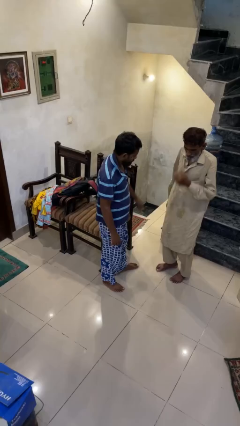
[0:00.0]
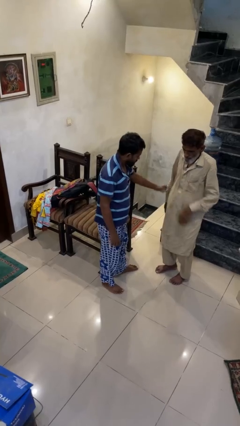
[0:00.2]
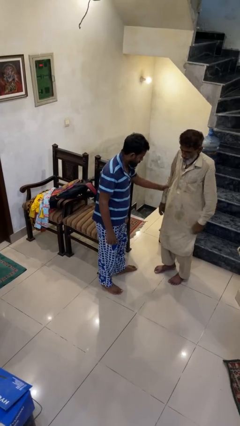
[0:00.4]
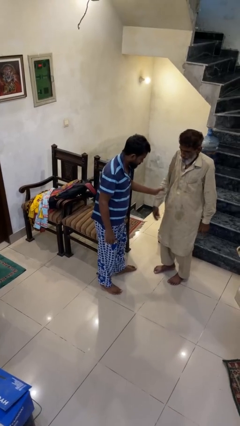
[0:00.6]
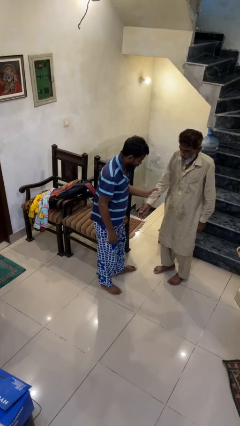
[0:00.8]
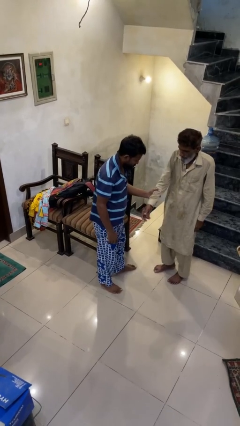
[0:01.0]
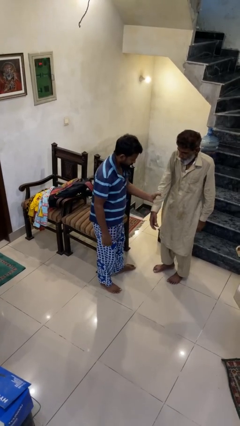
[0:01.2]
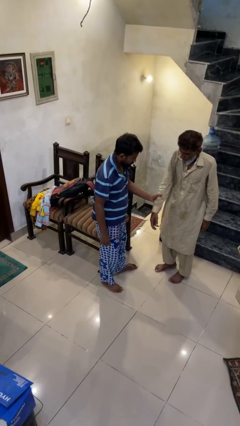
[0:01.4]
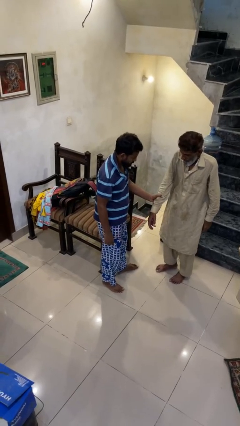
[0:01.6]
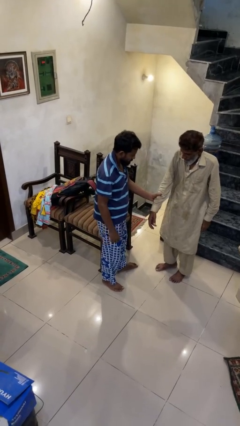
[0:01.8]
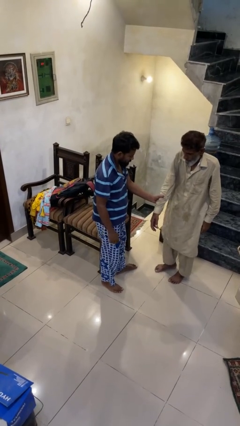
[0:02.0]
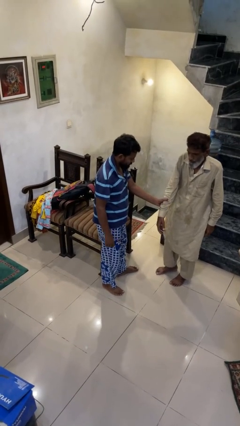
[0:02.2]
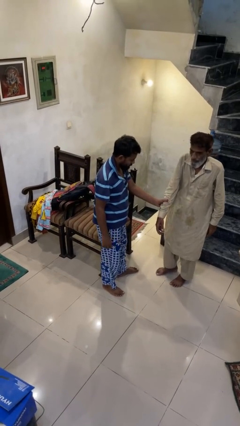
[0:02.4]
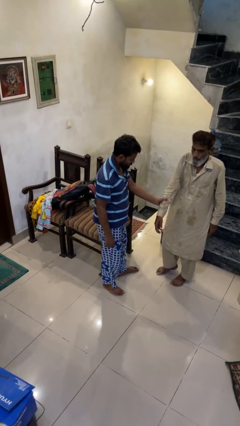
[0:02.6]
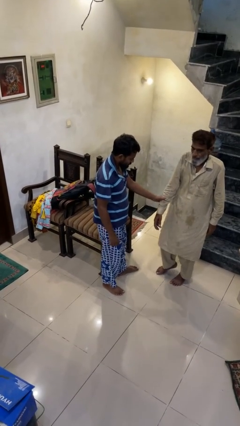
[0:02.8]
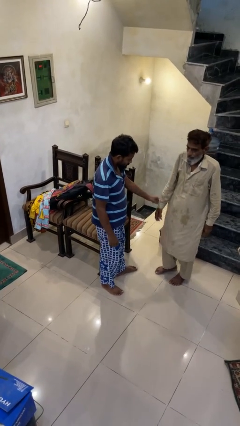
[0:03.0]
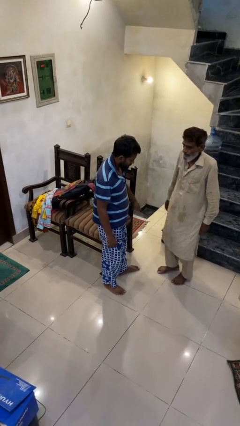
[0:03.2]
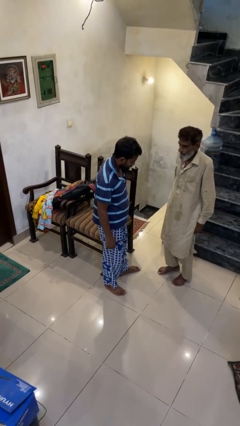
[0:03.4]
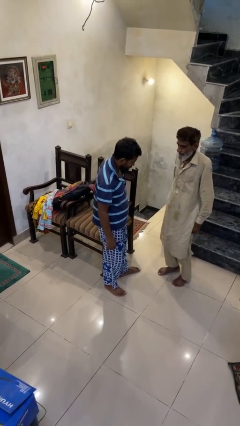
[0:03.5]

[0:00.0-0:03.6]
person grabs person by forearm

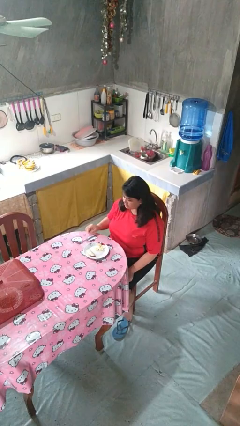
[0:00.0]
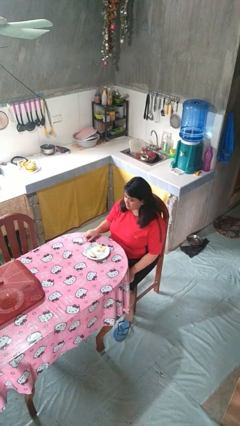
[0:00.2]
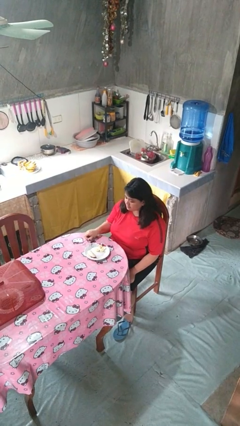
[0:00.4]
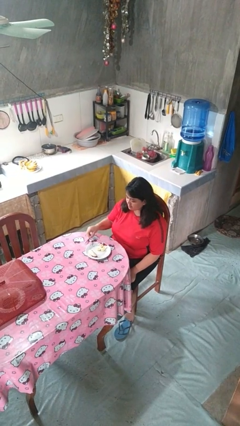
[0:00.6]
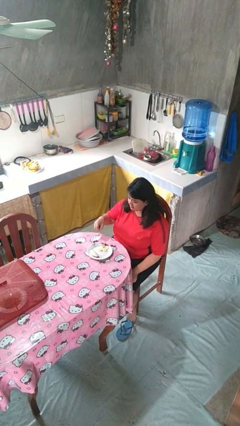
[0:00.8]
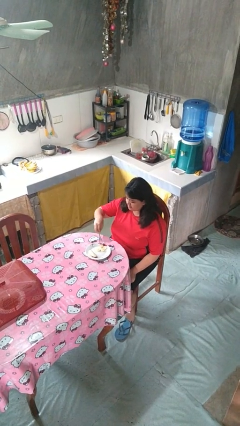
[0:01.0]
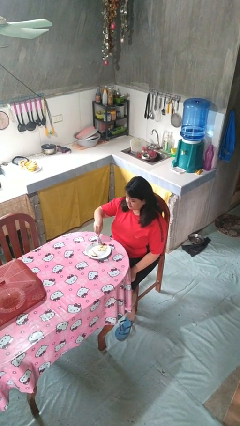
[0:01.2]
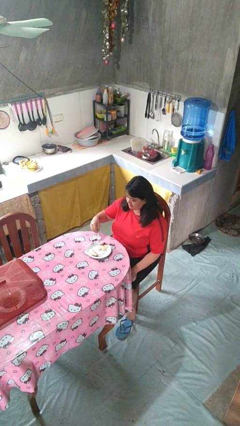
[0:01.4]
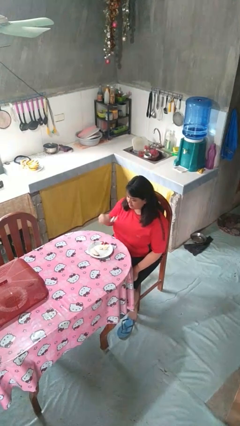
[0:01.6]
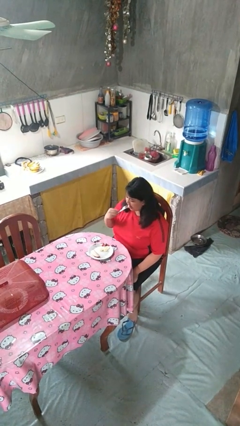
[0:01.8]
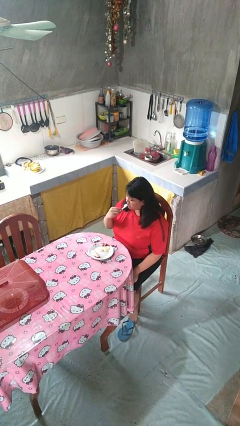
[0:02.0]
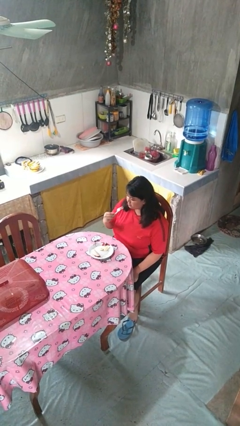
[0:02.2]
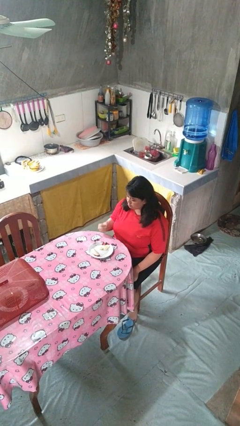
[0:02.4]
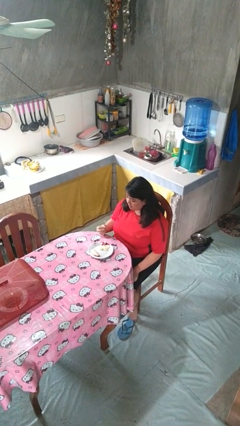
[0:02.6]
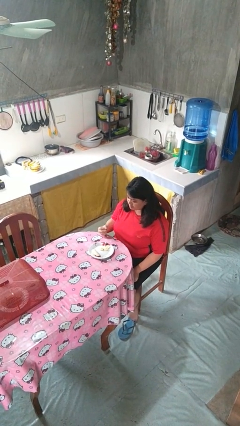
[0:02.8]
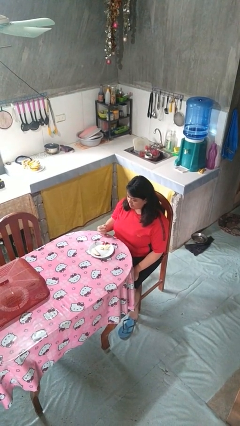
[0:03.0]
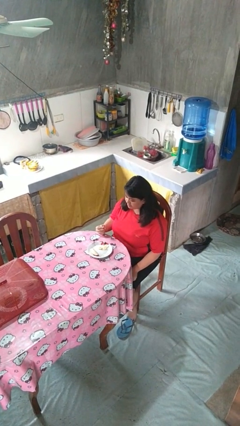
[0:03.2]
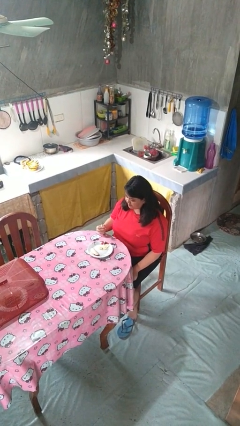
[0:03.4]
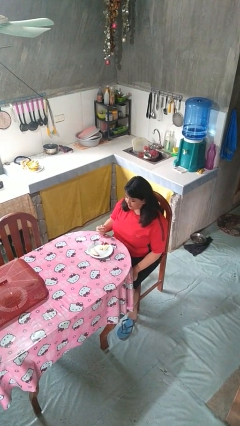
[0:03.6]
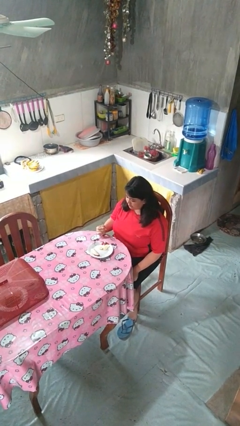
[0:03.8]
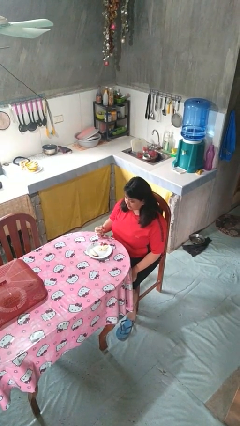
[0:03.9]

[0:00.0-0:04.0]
person eats with utensil

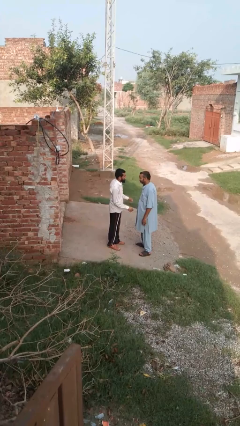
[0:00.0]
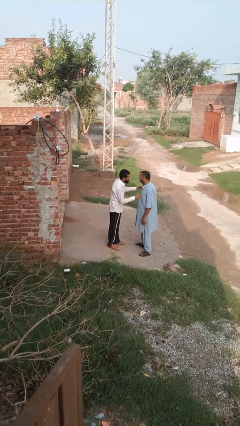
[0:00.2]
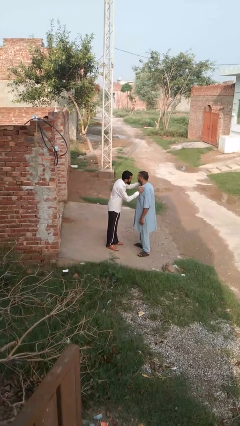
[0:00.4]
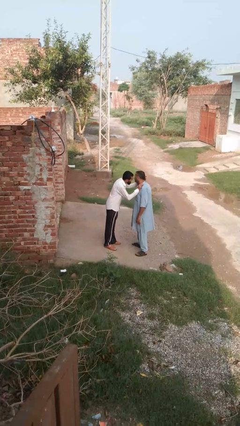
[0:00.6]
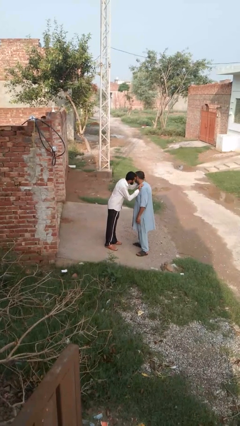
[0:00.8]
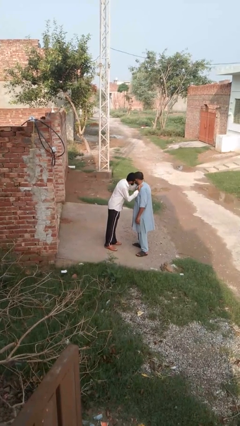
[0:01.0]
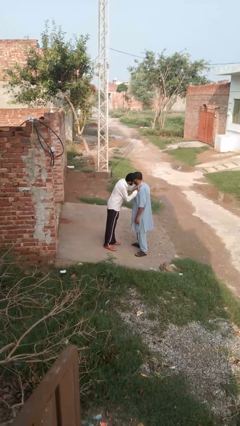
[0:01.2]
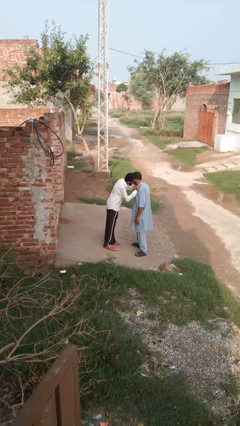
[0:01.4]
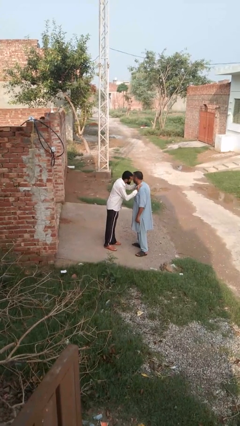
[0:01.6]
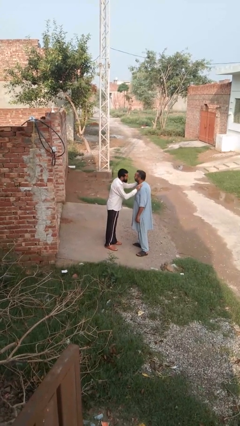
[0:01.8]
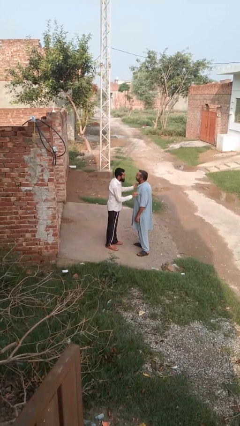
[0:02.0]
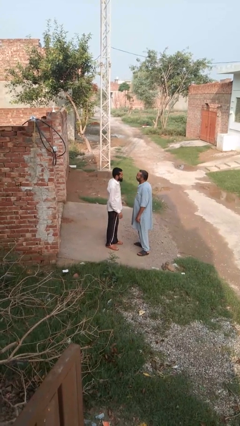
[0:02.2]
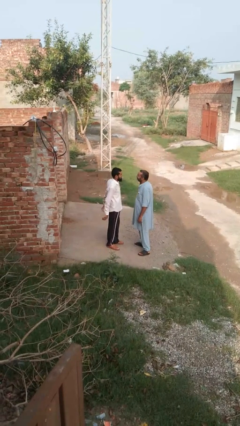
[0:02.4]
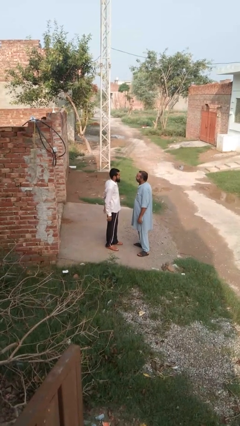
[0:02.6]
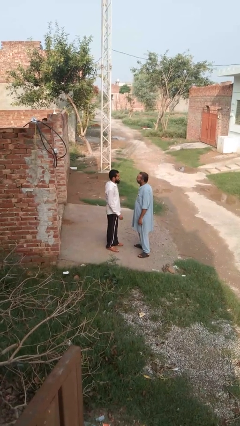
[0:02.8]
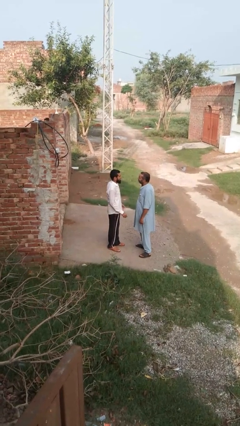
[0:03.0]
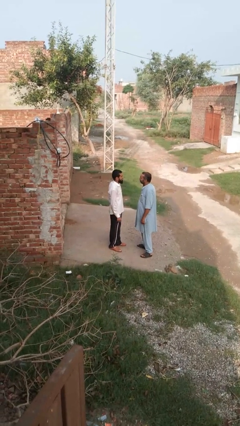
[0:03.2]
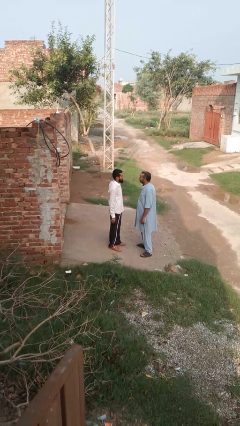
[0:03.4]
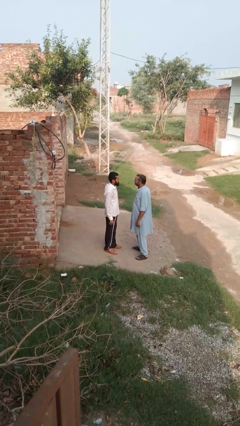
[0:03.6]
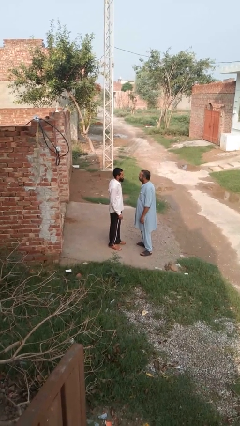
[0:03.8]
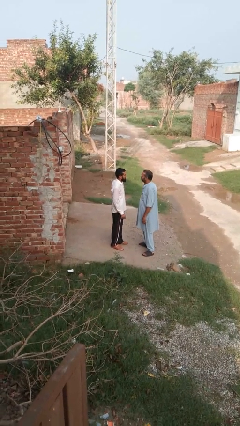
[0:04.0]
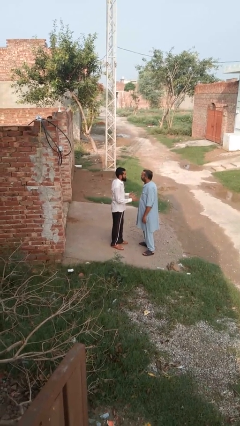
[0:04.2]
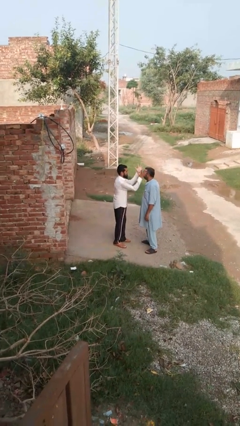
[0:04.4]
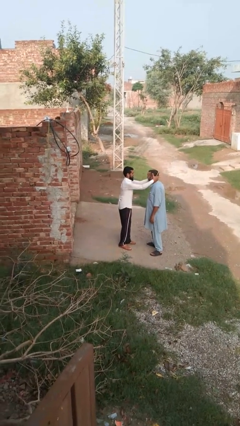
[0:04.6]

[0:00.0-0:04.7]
person kisses cheek of person

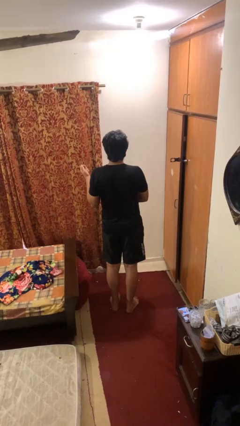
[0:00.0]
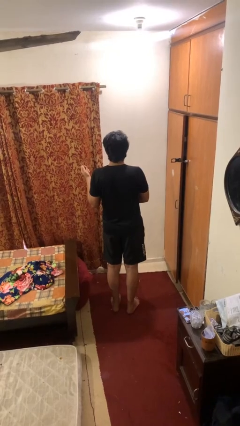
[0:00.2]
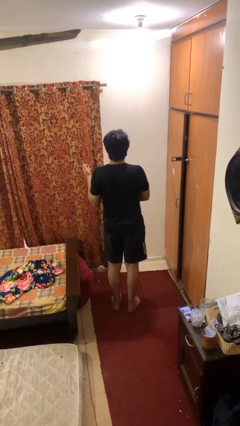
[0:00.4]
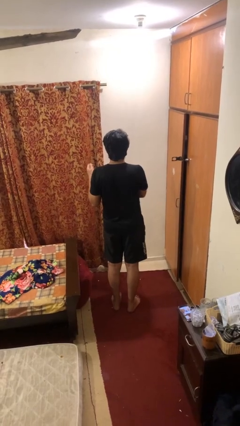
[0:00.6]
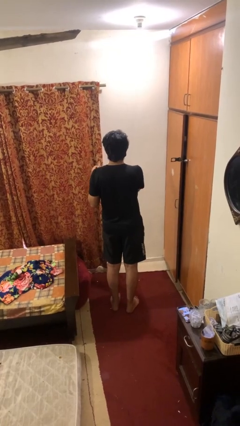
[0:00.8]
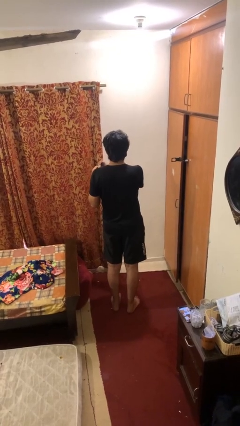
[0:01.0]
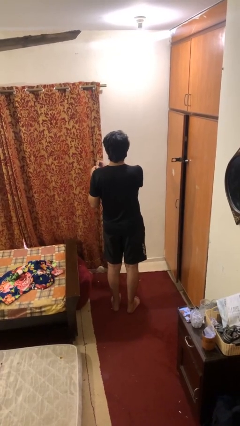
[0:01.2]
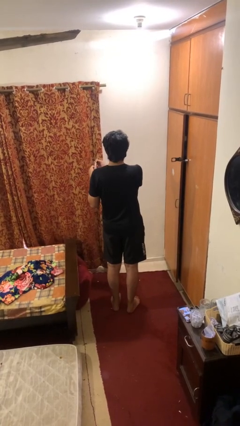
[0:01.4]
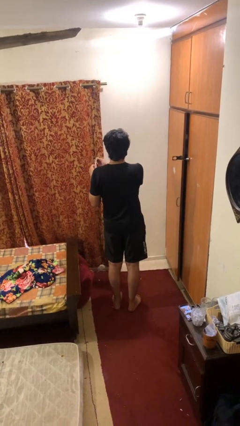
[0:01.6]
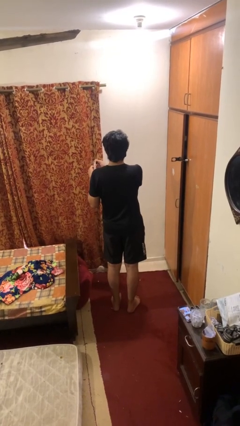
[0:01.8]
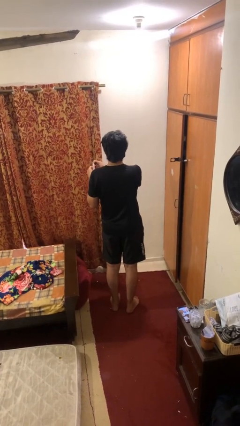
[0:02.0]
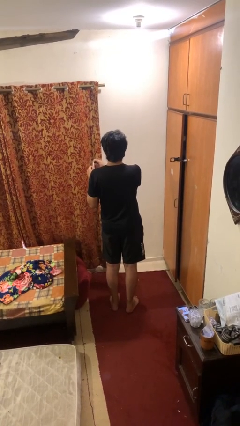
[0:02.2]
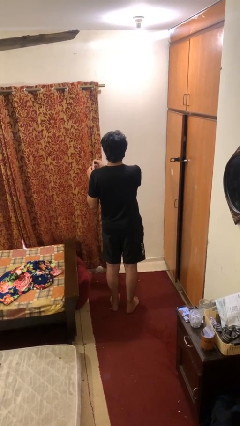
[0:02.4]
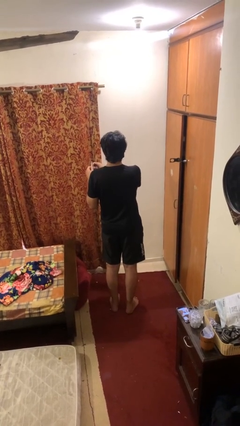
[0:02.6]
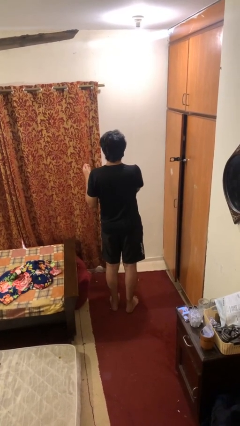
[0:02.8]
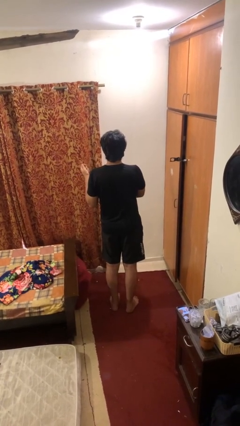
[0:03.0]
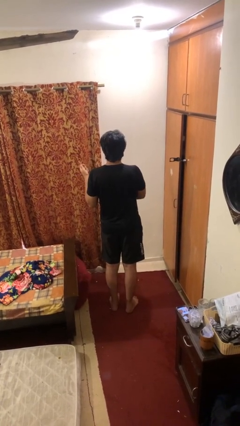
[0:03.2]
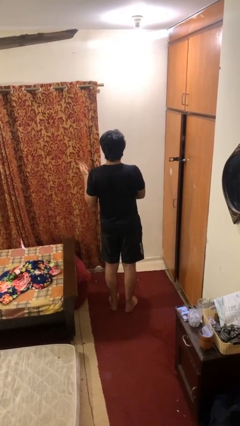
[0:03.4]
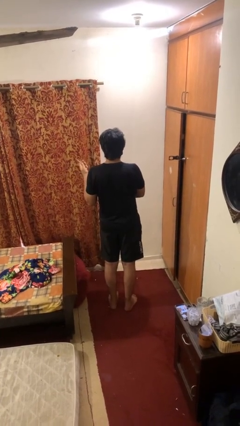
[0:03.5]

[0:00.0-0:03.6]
person files fingernails

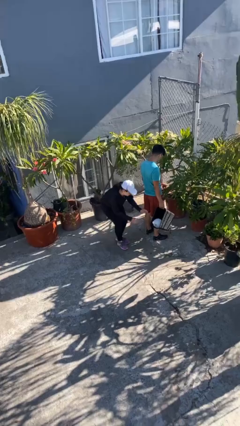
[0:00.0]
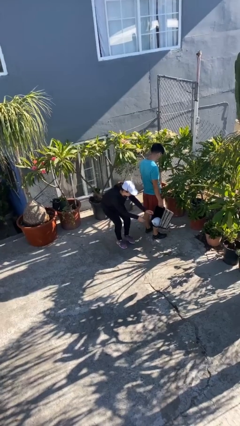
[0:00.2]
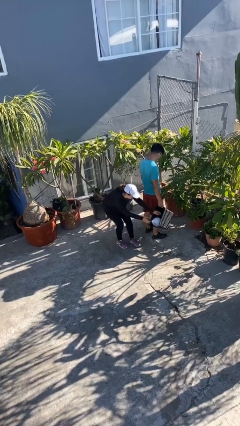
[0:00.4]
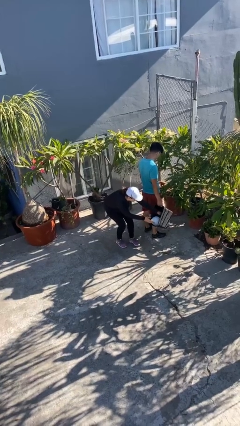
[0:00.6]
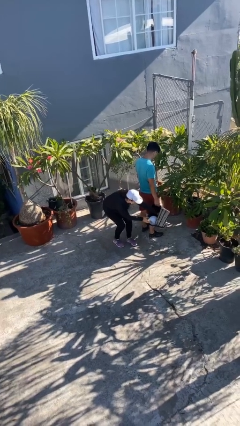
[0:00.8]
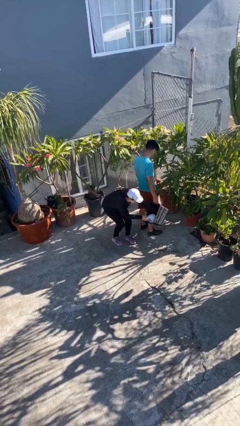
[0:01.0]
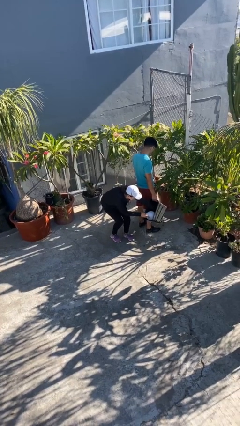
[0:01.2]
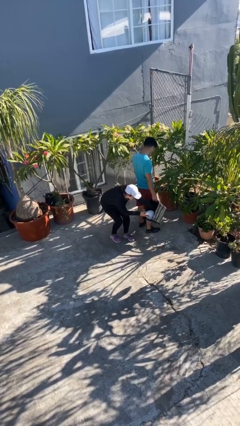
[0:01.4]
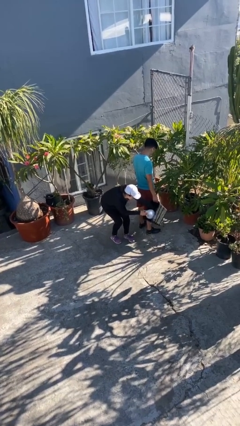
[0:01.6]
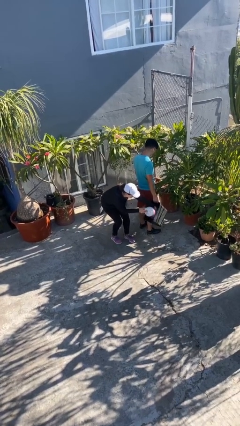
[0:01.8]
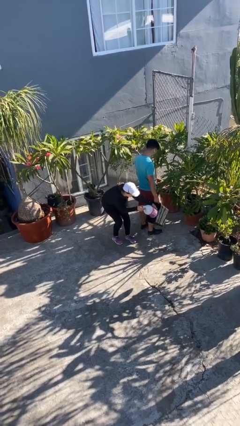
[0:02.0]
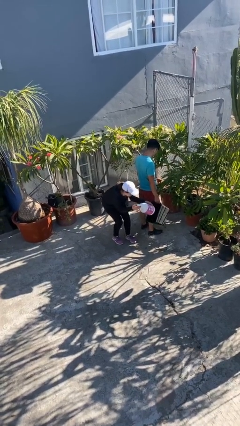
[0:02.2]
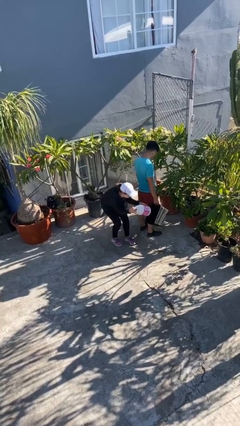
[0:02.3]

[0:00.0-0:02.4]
person steals object from person
